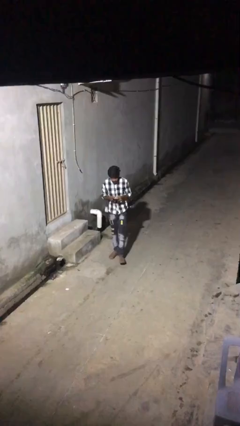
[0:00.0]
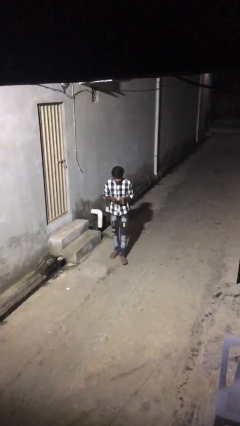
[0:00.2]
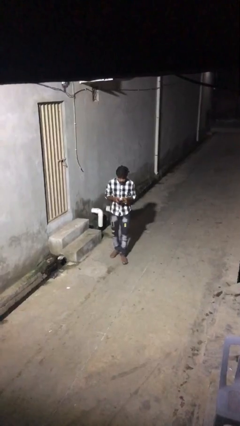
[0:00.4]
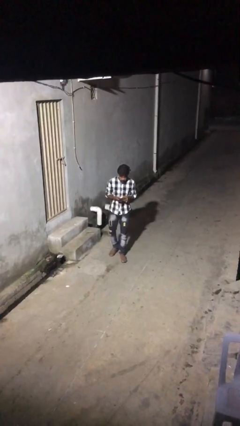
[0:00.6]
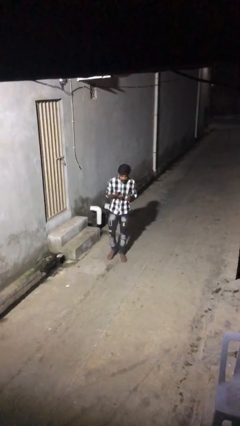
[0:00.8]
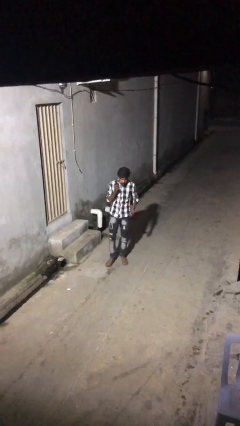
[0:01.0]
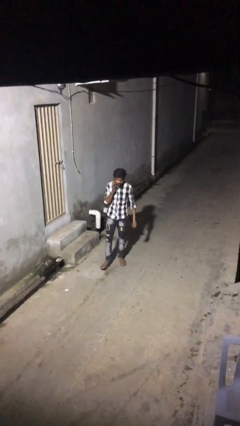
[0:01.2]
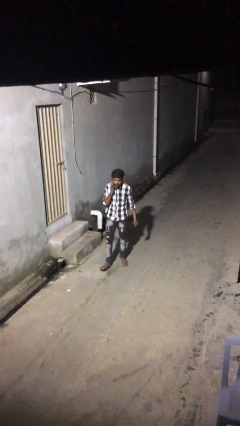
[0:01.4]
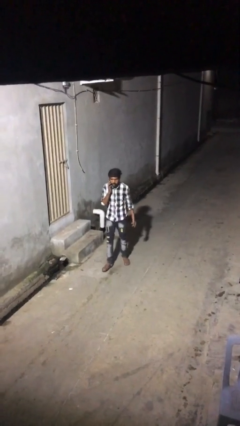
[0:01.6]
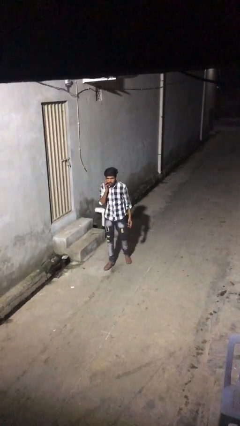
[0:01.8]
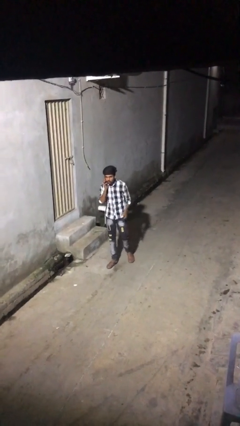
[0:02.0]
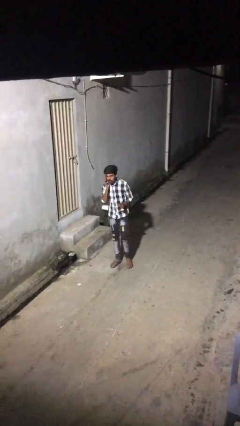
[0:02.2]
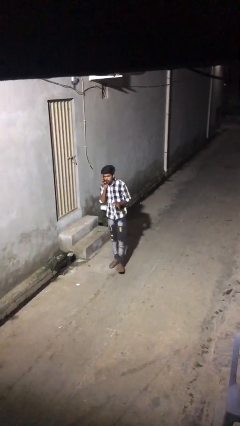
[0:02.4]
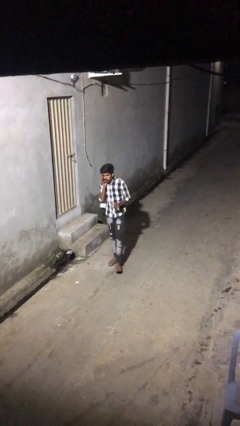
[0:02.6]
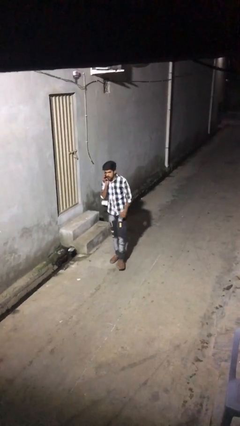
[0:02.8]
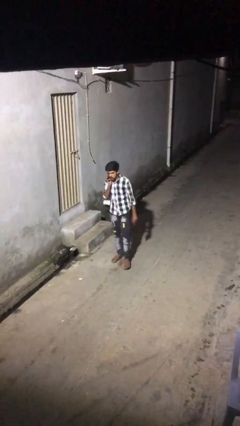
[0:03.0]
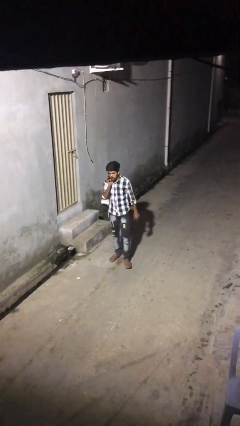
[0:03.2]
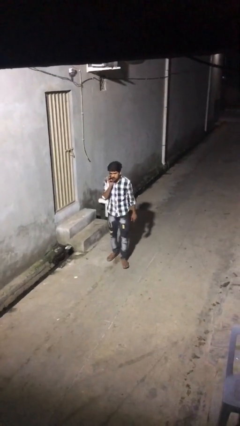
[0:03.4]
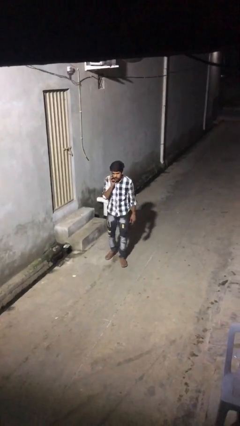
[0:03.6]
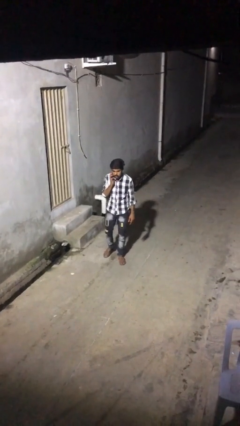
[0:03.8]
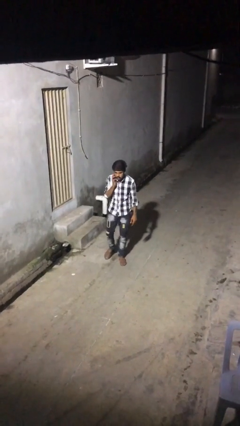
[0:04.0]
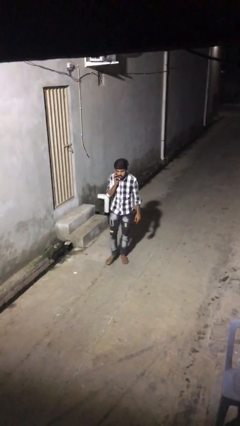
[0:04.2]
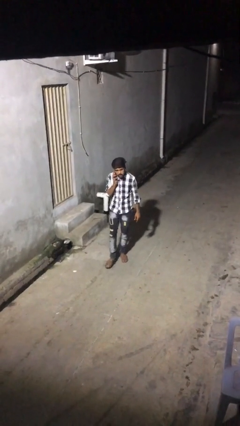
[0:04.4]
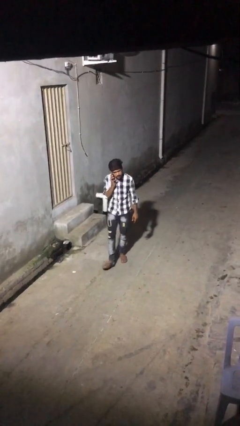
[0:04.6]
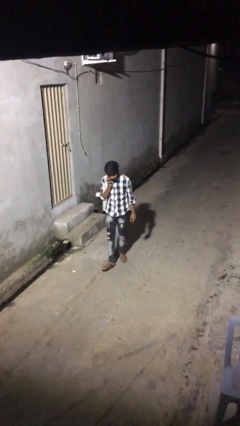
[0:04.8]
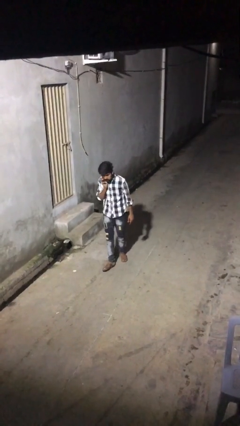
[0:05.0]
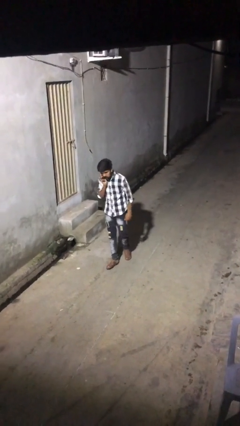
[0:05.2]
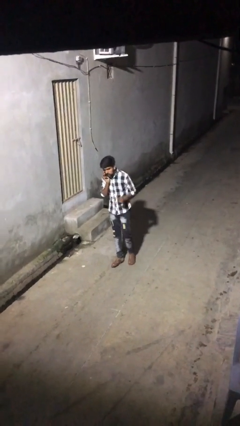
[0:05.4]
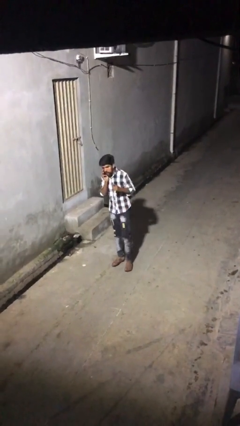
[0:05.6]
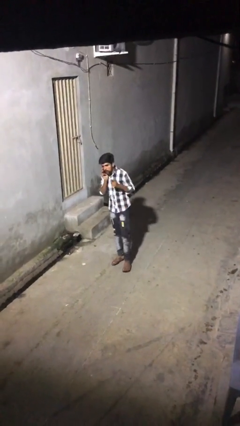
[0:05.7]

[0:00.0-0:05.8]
person talks on phone

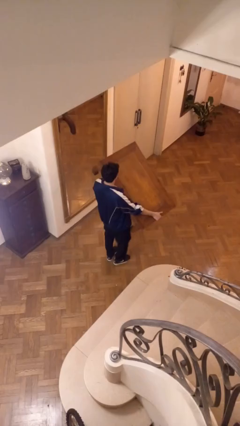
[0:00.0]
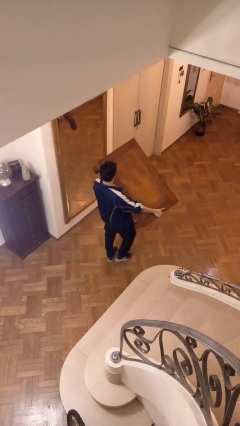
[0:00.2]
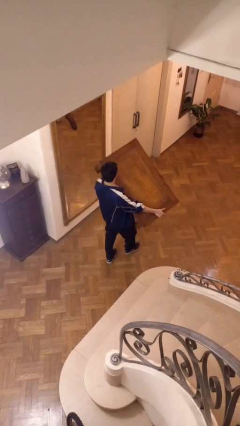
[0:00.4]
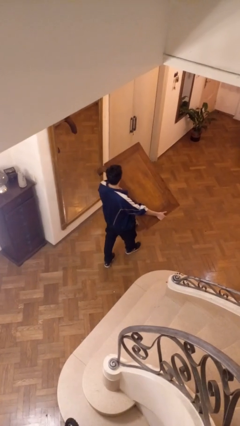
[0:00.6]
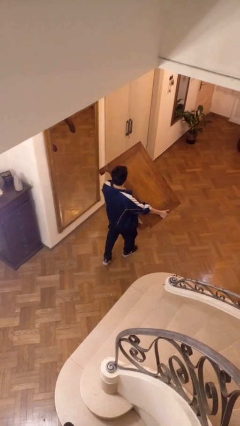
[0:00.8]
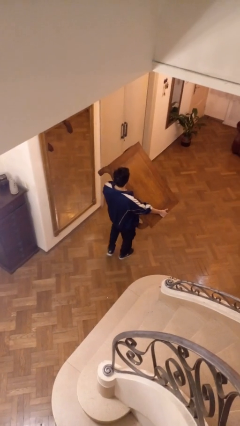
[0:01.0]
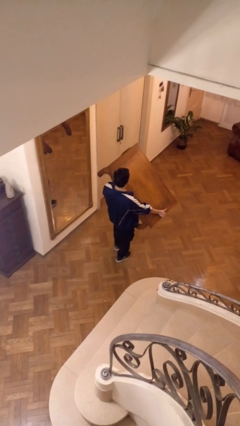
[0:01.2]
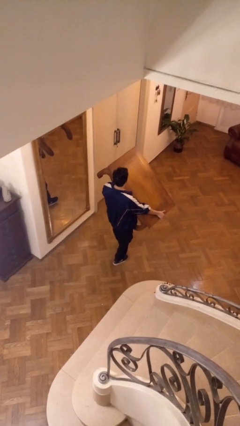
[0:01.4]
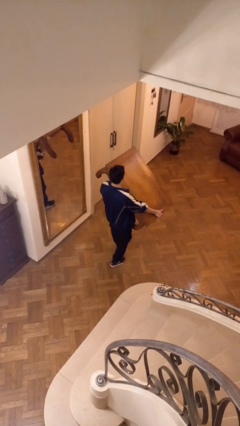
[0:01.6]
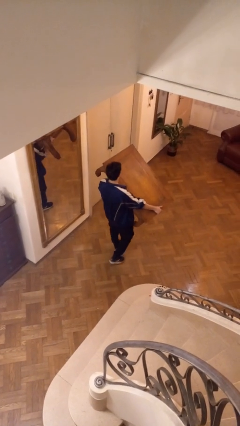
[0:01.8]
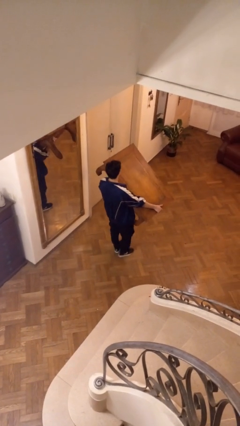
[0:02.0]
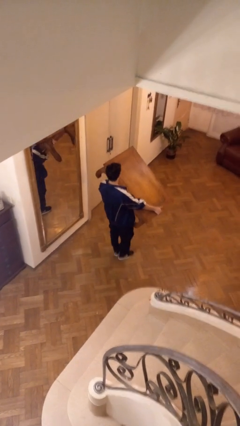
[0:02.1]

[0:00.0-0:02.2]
person carries furniture

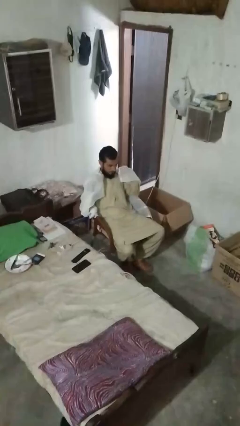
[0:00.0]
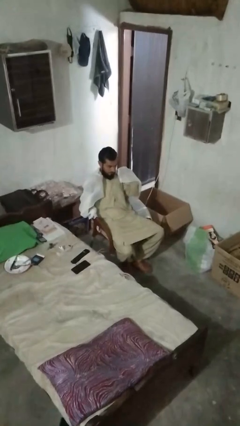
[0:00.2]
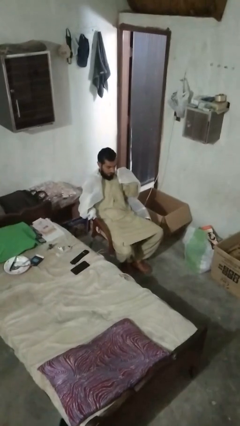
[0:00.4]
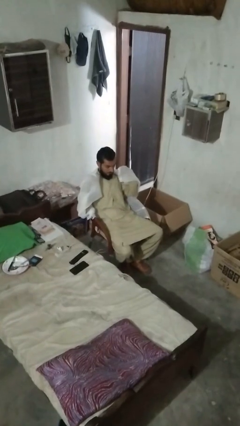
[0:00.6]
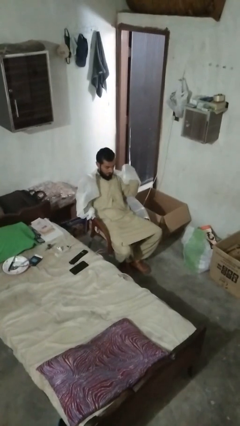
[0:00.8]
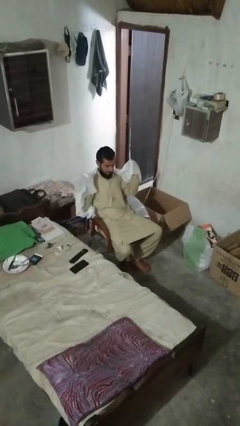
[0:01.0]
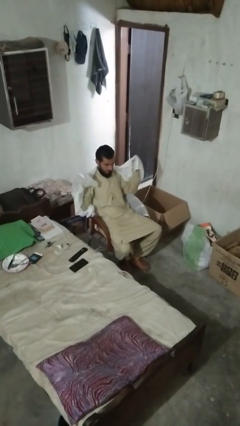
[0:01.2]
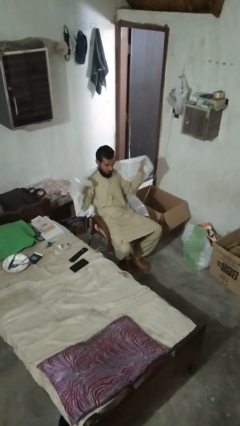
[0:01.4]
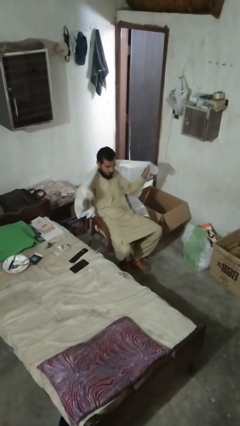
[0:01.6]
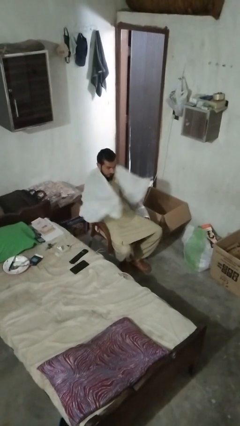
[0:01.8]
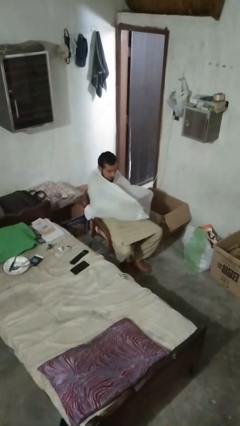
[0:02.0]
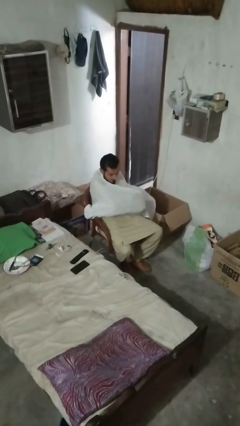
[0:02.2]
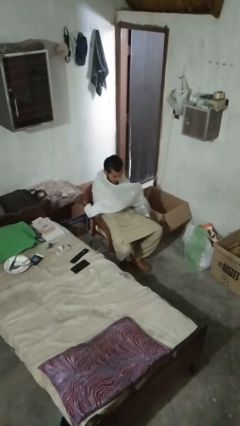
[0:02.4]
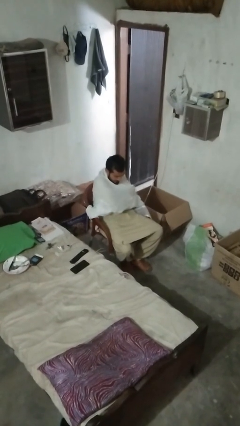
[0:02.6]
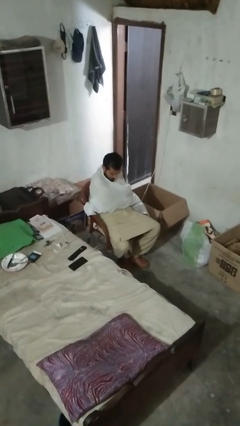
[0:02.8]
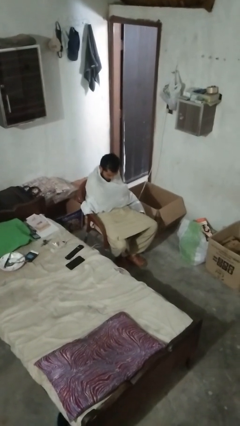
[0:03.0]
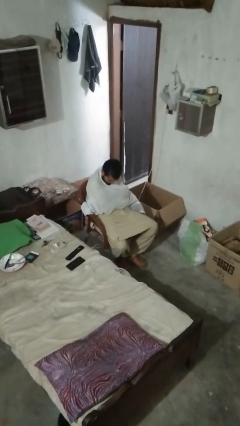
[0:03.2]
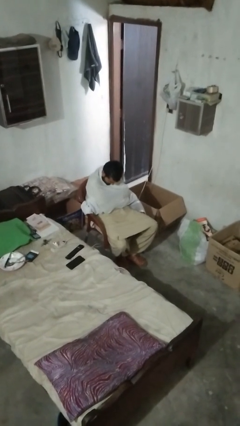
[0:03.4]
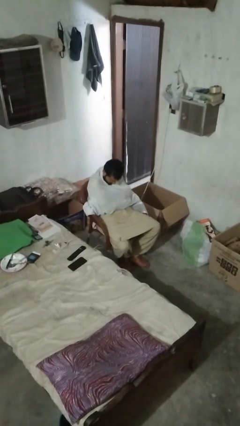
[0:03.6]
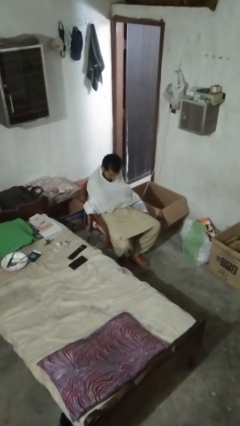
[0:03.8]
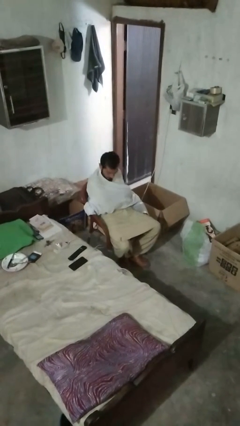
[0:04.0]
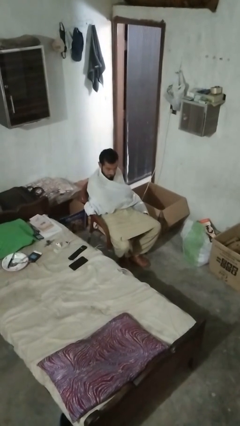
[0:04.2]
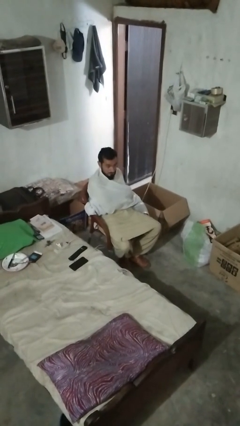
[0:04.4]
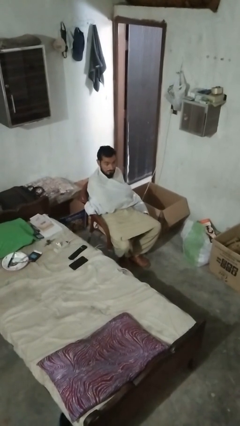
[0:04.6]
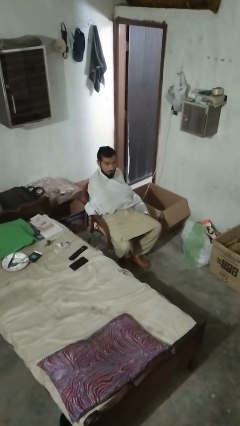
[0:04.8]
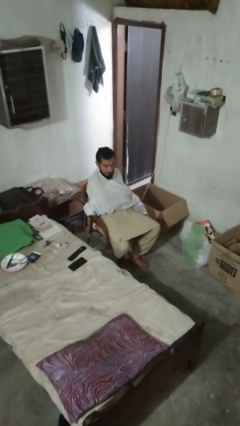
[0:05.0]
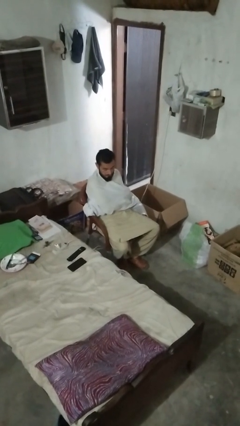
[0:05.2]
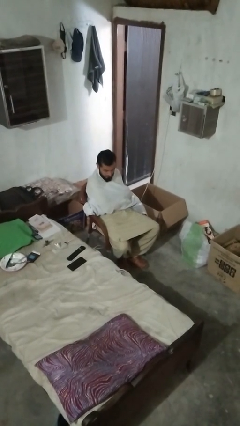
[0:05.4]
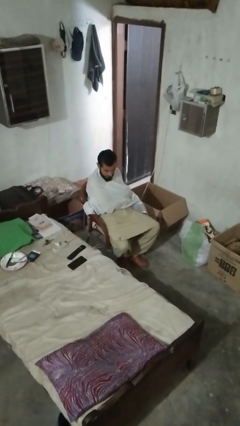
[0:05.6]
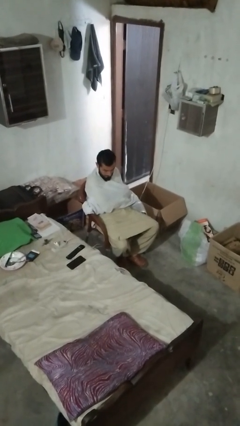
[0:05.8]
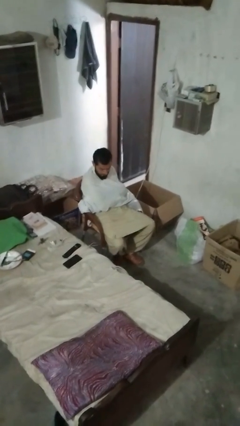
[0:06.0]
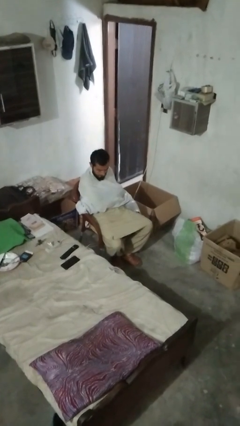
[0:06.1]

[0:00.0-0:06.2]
person covers with blanket

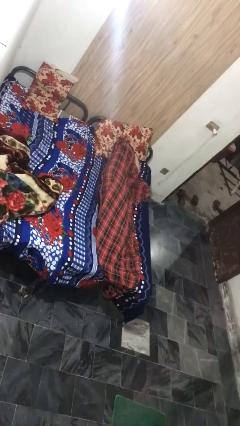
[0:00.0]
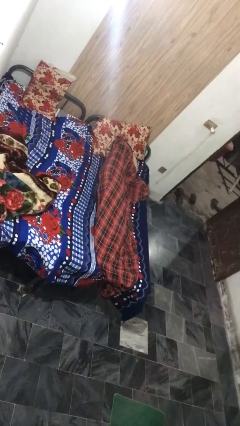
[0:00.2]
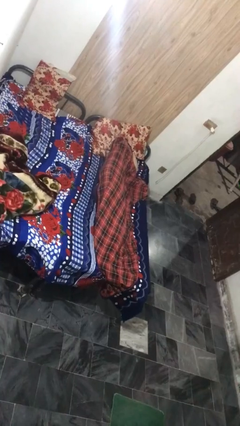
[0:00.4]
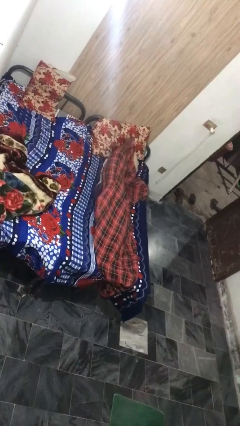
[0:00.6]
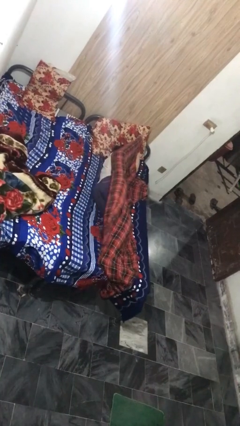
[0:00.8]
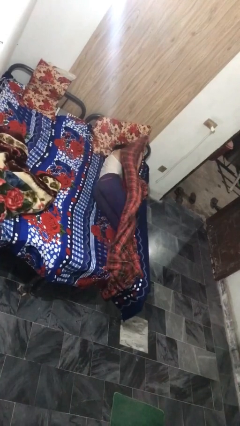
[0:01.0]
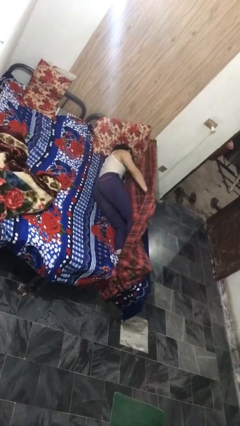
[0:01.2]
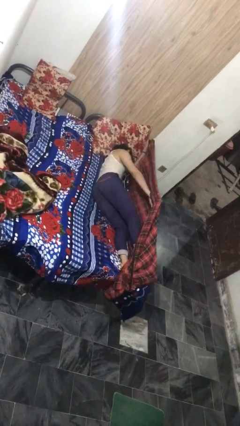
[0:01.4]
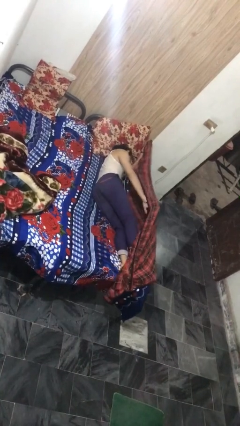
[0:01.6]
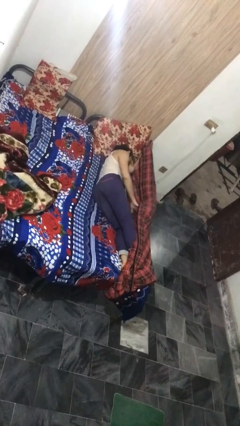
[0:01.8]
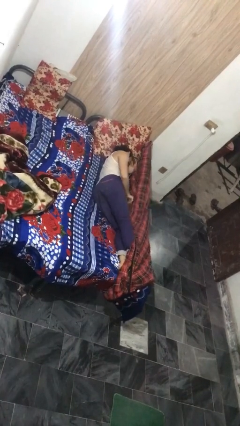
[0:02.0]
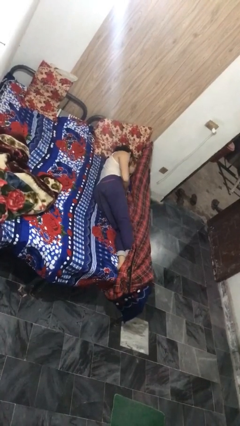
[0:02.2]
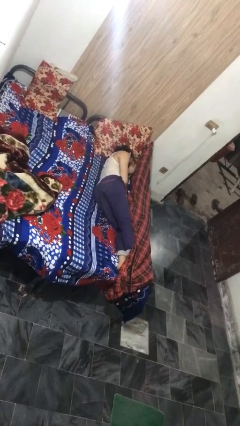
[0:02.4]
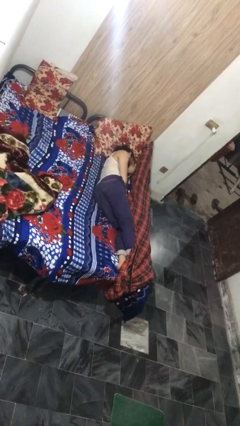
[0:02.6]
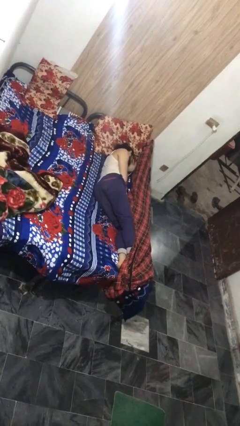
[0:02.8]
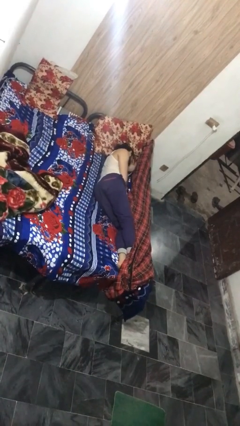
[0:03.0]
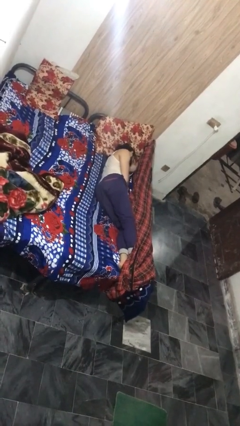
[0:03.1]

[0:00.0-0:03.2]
person uncovers with bedsheets

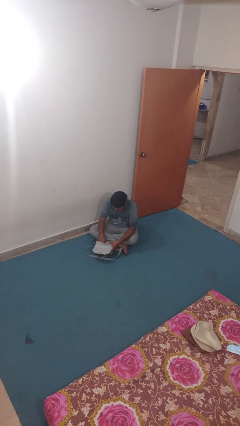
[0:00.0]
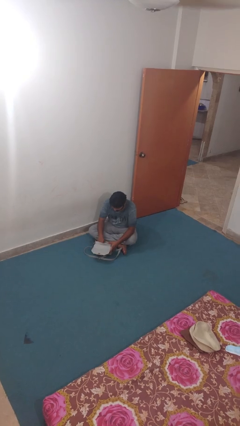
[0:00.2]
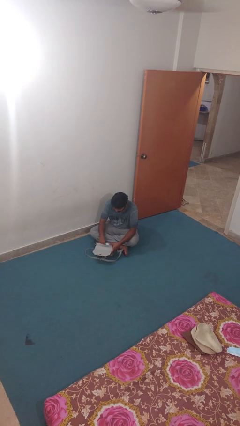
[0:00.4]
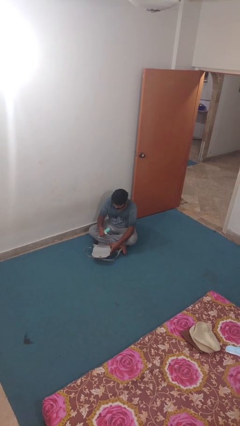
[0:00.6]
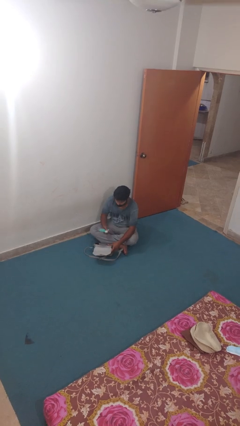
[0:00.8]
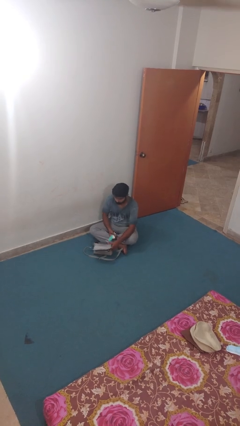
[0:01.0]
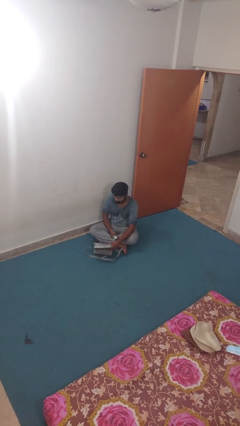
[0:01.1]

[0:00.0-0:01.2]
person takes object from purse
